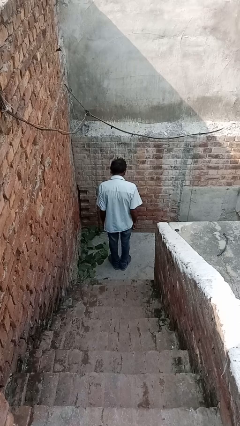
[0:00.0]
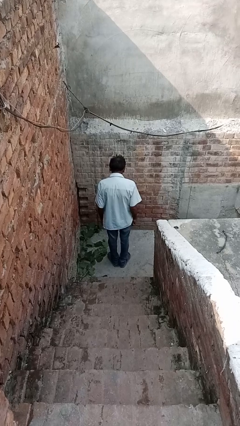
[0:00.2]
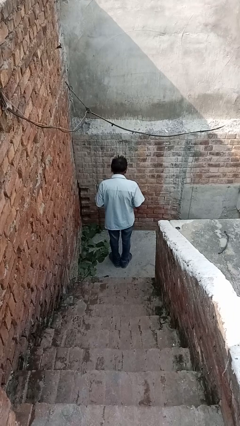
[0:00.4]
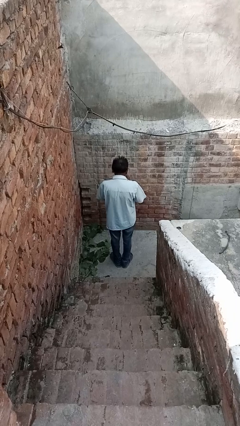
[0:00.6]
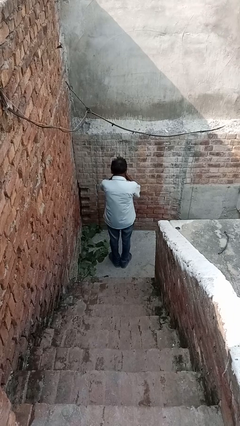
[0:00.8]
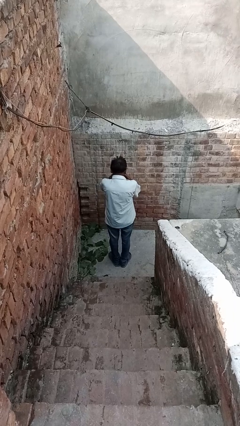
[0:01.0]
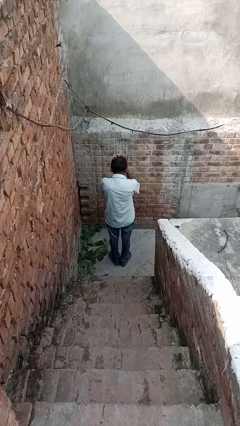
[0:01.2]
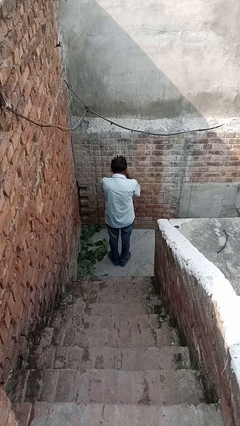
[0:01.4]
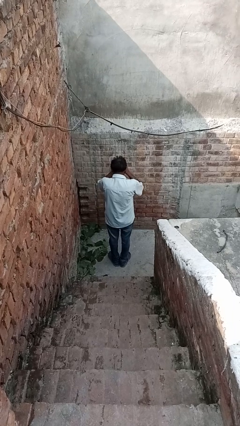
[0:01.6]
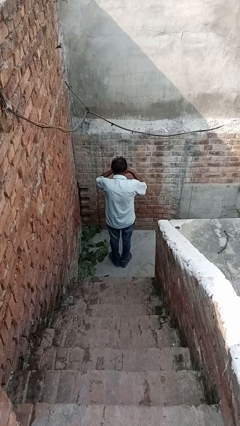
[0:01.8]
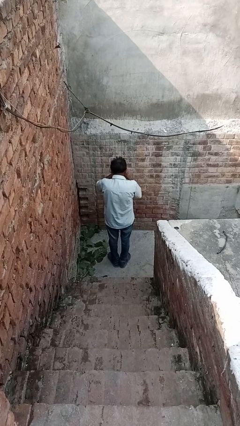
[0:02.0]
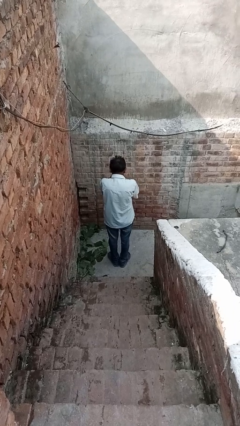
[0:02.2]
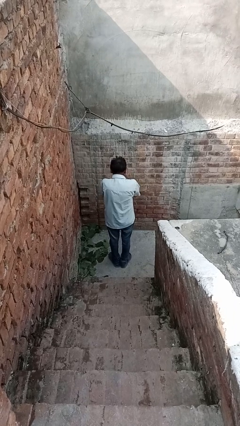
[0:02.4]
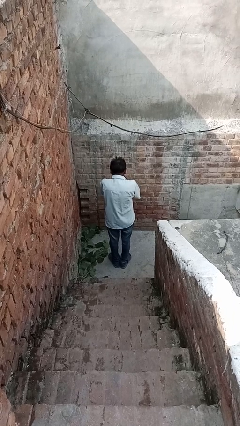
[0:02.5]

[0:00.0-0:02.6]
person blows into hands

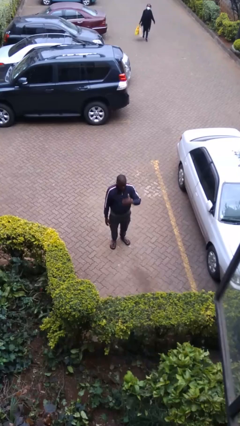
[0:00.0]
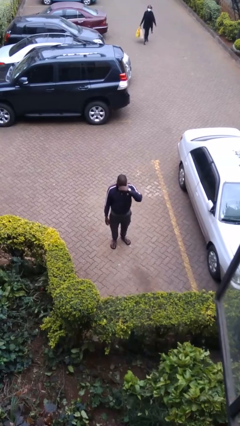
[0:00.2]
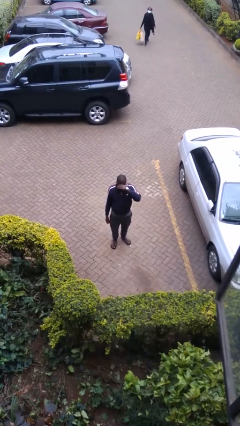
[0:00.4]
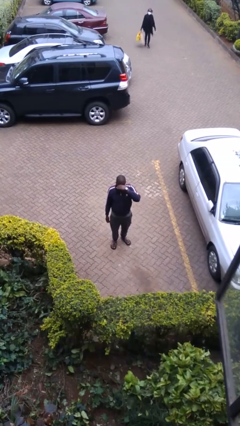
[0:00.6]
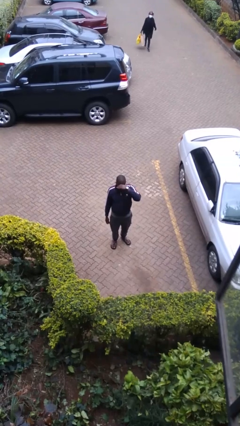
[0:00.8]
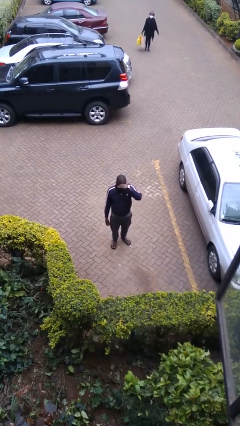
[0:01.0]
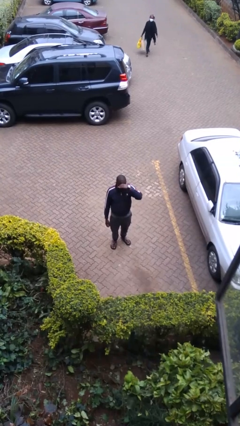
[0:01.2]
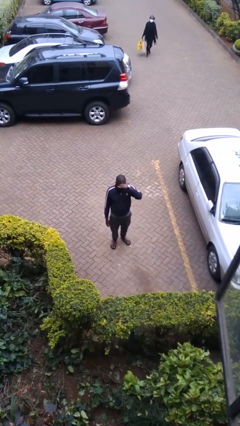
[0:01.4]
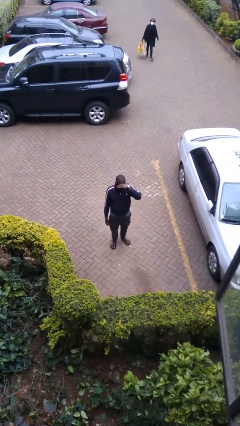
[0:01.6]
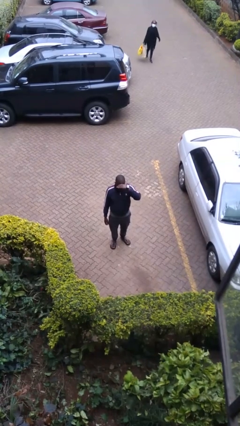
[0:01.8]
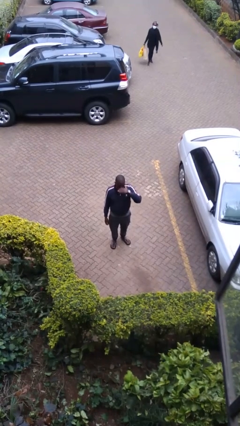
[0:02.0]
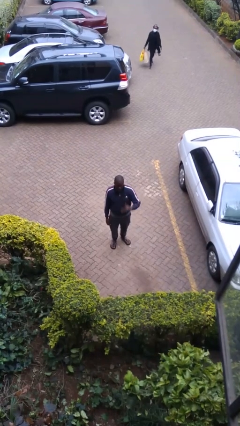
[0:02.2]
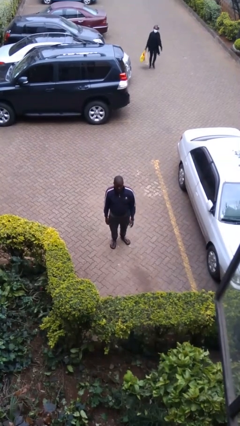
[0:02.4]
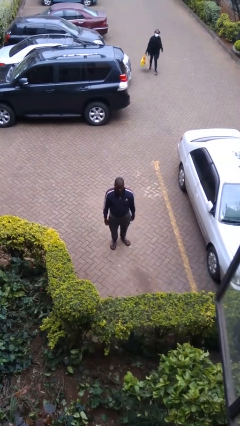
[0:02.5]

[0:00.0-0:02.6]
person shades eyes

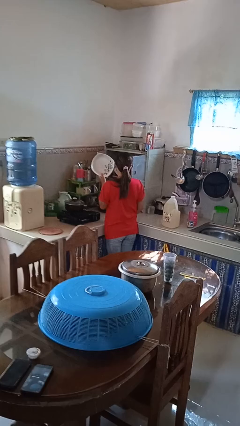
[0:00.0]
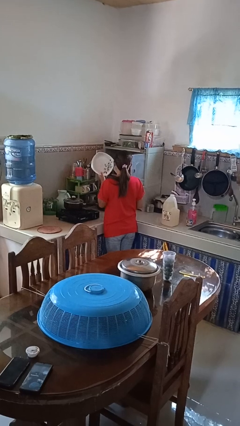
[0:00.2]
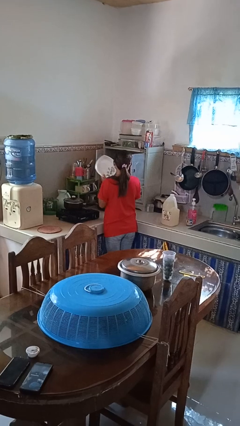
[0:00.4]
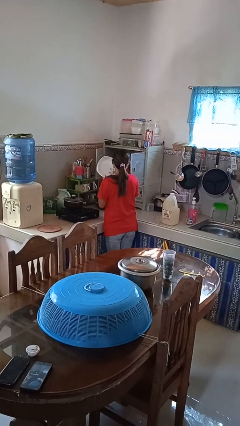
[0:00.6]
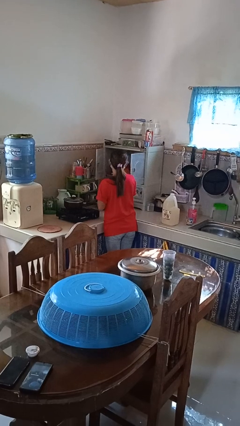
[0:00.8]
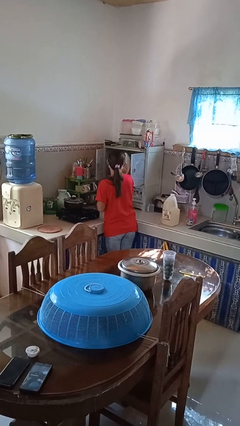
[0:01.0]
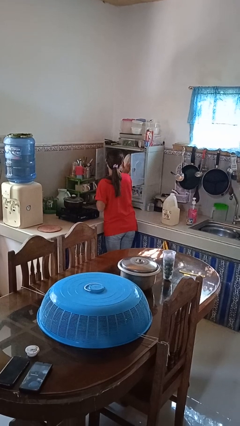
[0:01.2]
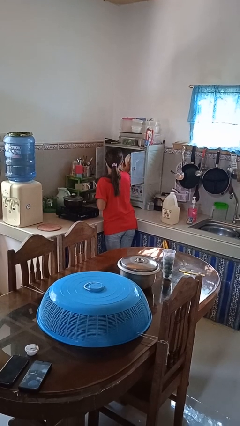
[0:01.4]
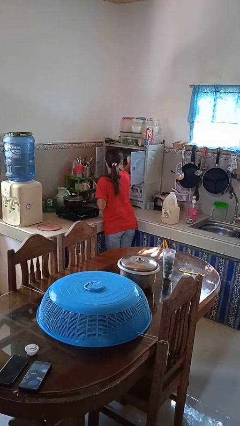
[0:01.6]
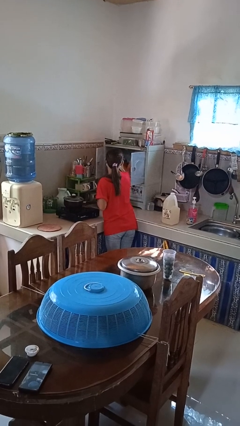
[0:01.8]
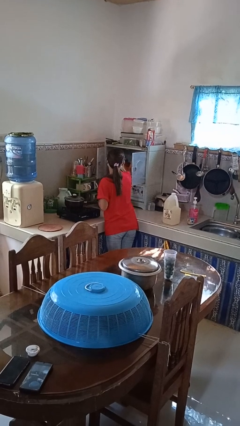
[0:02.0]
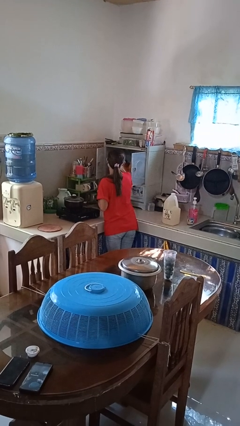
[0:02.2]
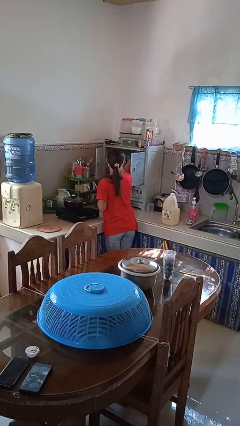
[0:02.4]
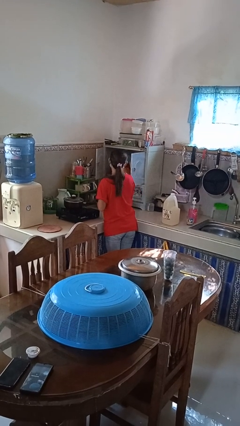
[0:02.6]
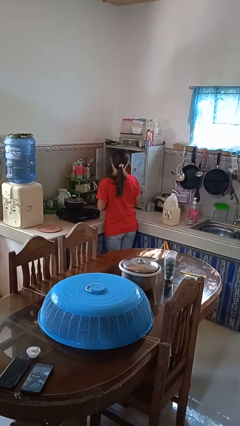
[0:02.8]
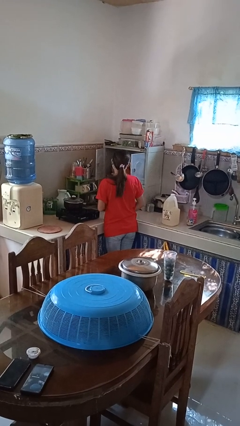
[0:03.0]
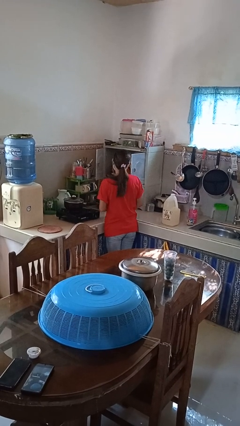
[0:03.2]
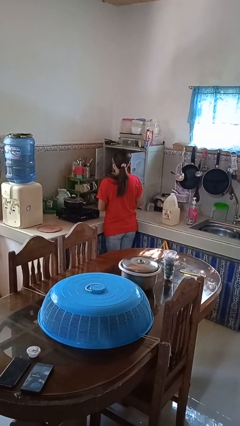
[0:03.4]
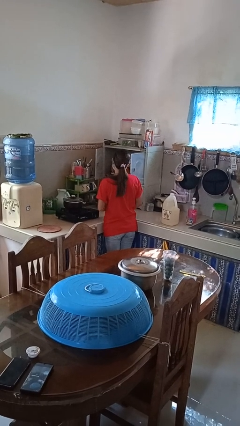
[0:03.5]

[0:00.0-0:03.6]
person puts object in cabinet

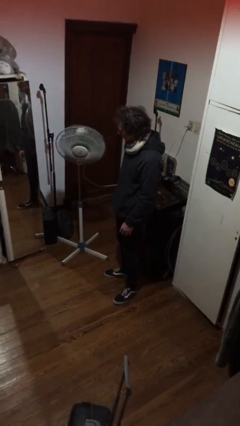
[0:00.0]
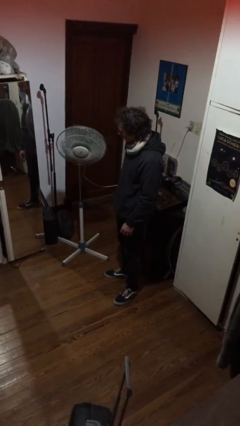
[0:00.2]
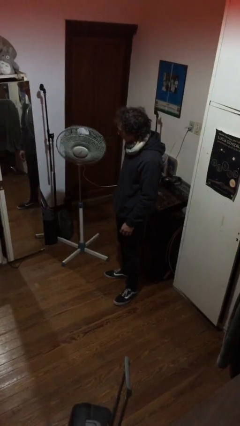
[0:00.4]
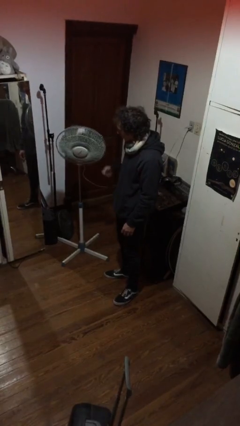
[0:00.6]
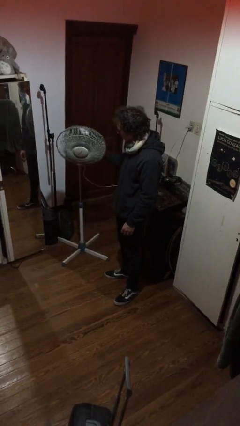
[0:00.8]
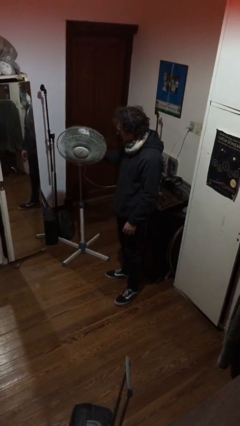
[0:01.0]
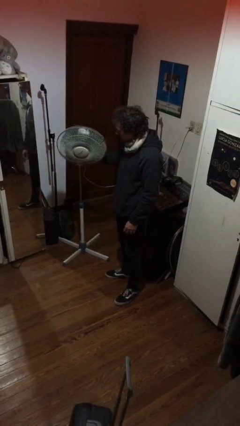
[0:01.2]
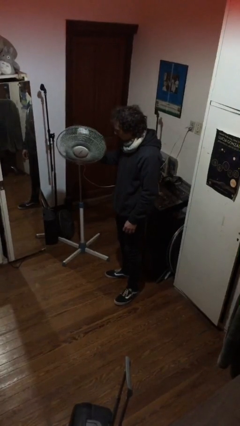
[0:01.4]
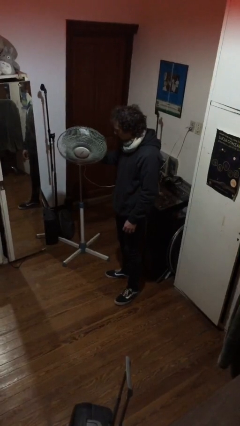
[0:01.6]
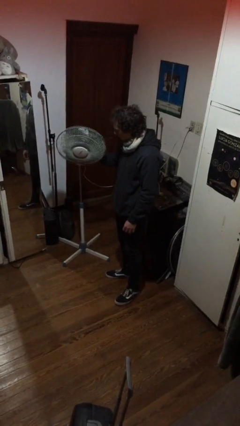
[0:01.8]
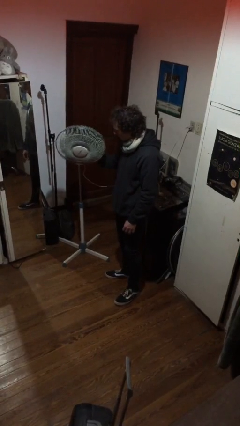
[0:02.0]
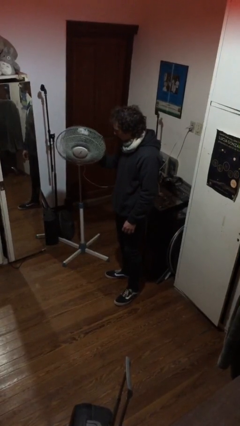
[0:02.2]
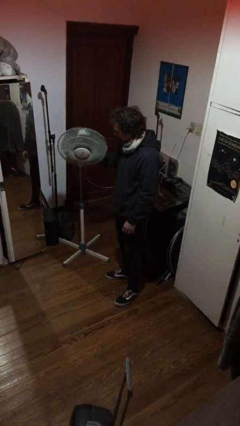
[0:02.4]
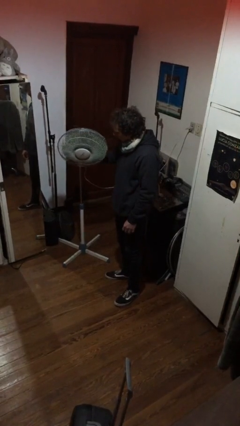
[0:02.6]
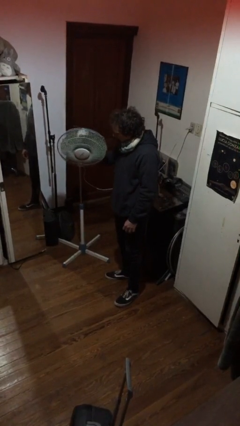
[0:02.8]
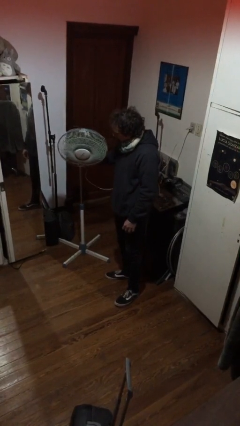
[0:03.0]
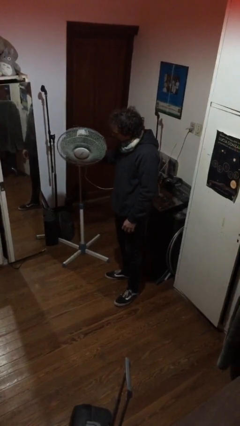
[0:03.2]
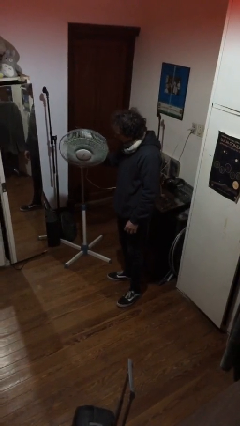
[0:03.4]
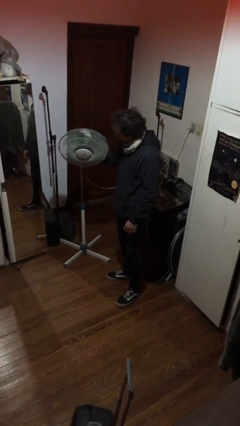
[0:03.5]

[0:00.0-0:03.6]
person turns off fan

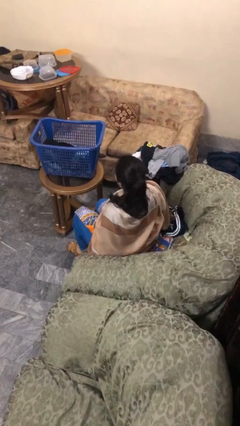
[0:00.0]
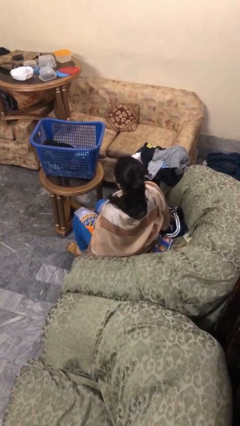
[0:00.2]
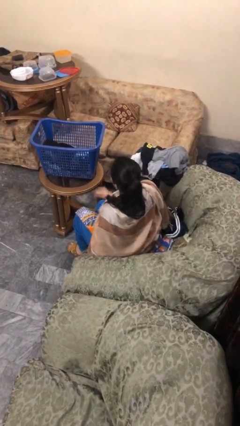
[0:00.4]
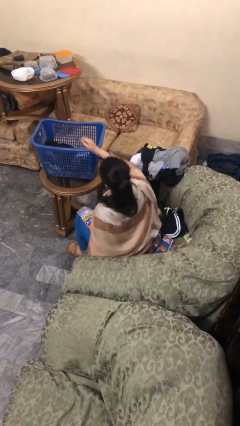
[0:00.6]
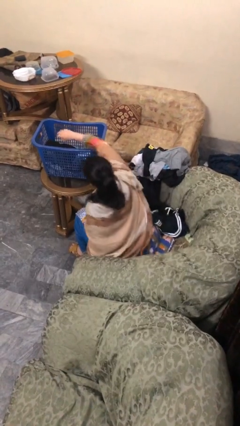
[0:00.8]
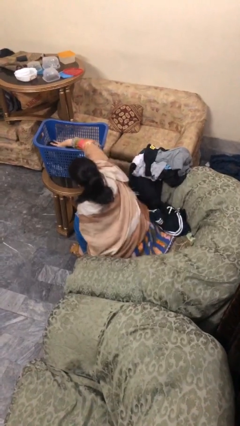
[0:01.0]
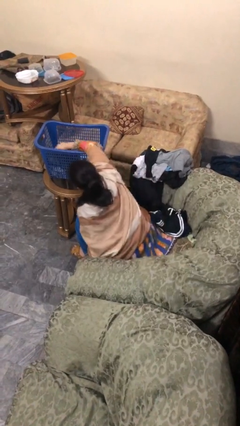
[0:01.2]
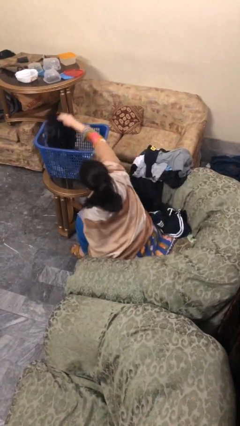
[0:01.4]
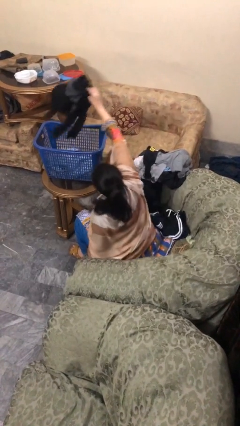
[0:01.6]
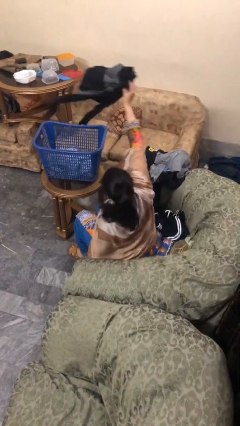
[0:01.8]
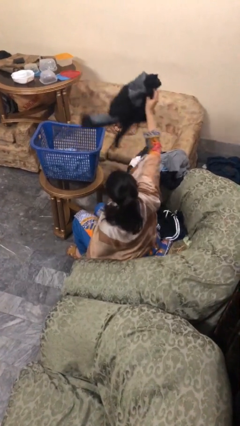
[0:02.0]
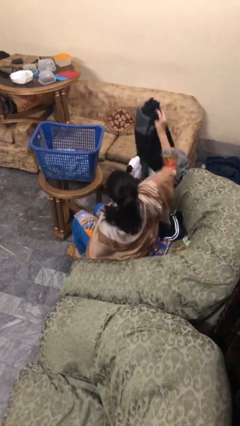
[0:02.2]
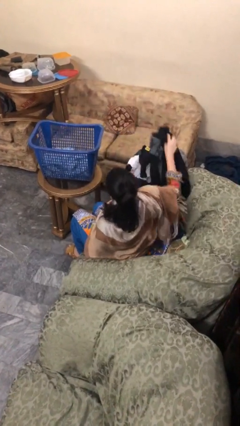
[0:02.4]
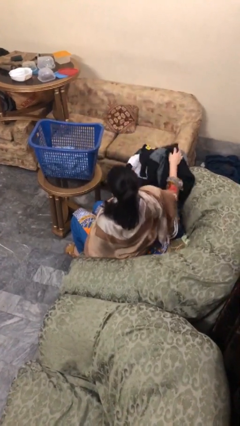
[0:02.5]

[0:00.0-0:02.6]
person takes object from basket

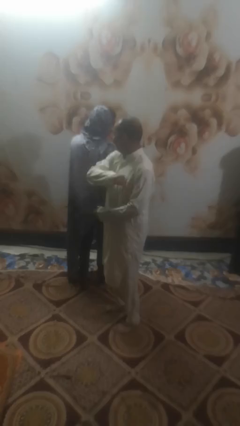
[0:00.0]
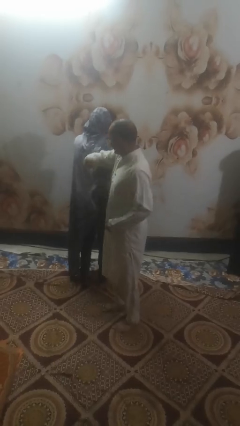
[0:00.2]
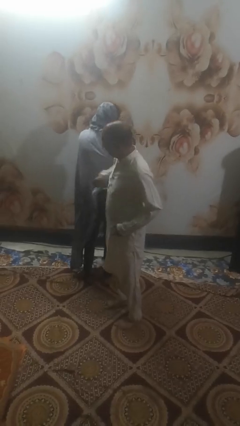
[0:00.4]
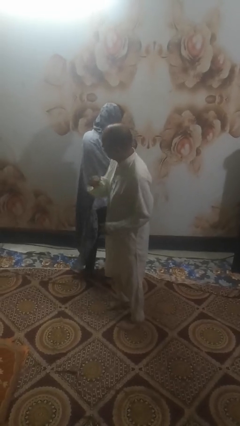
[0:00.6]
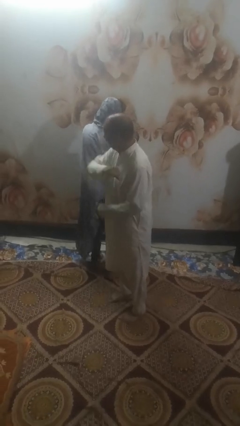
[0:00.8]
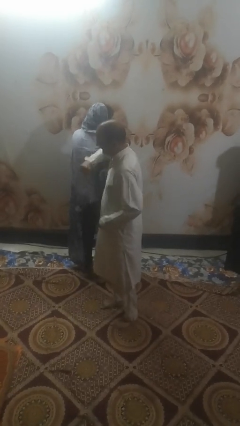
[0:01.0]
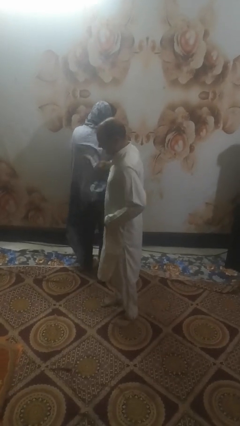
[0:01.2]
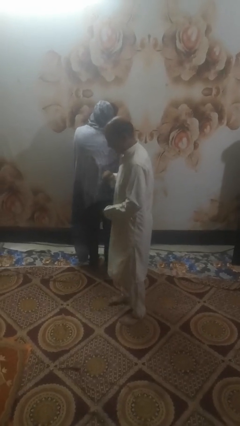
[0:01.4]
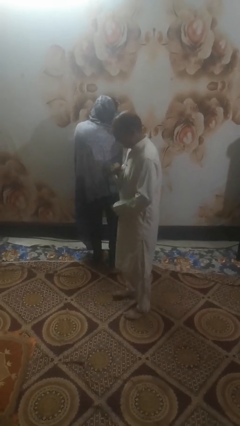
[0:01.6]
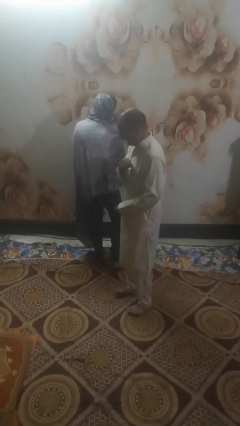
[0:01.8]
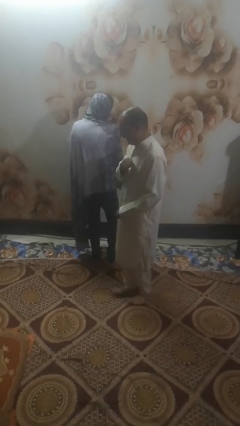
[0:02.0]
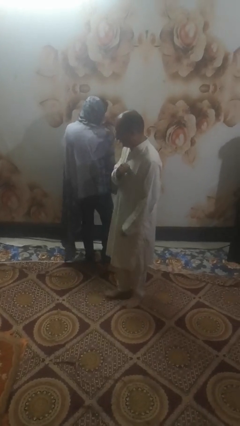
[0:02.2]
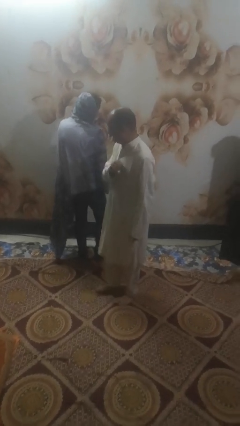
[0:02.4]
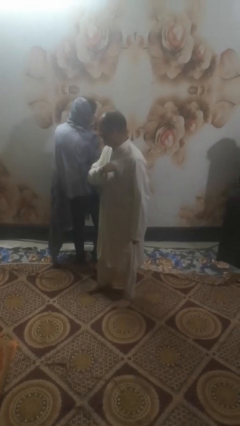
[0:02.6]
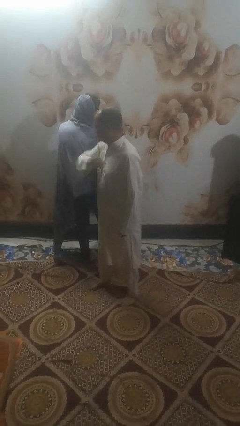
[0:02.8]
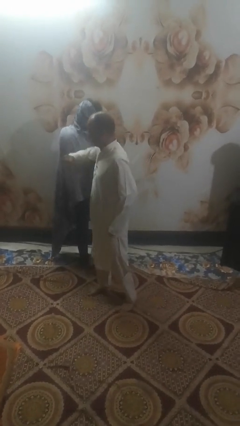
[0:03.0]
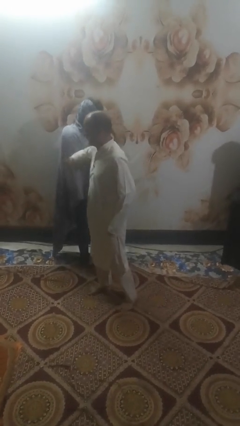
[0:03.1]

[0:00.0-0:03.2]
person nudges person with elbow
